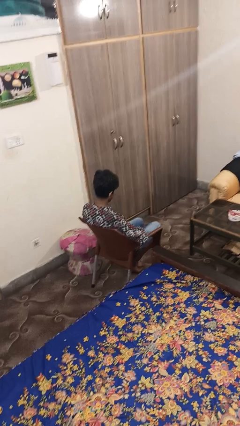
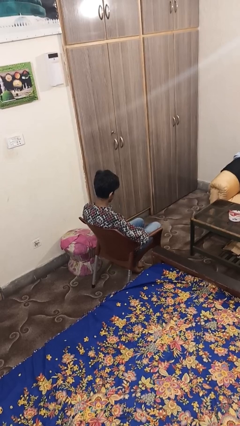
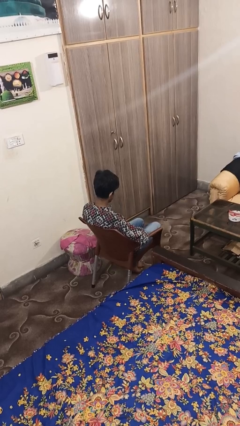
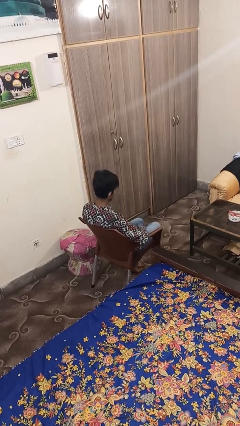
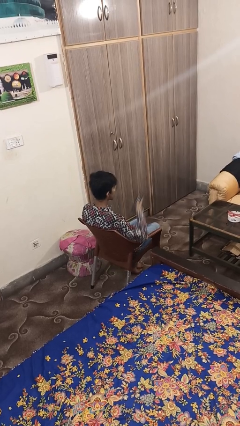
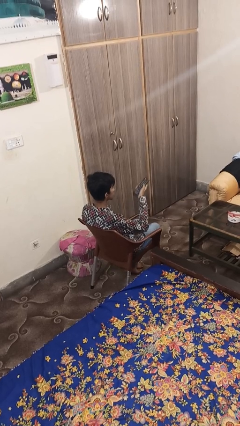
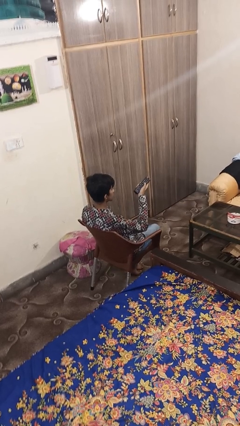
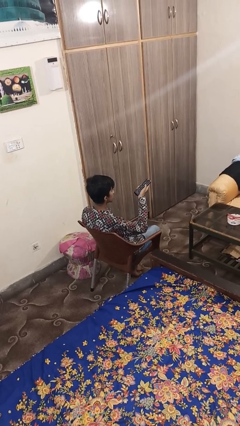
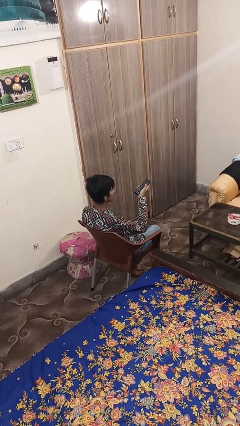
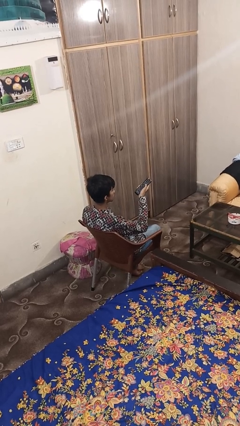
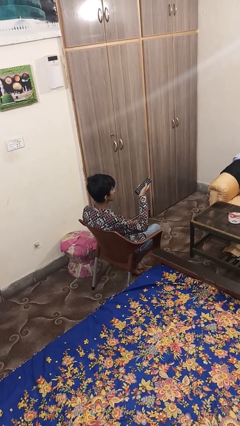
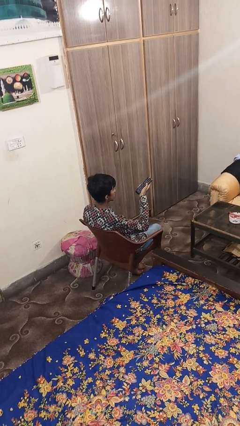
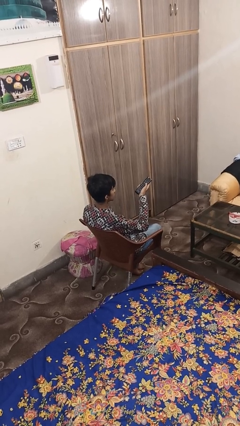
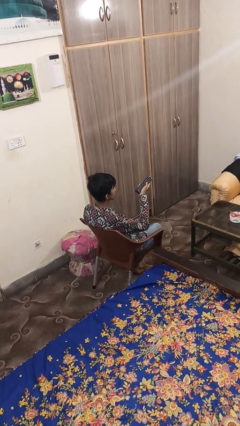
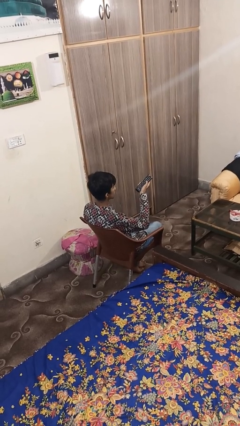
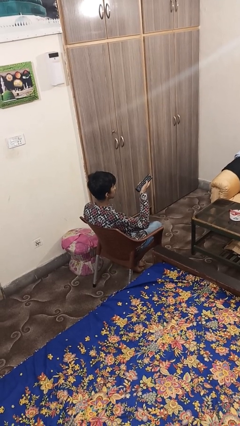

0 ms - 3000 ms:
person uses television remote

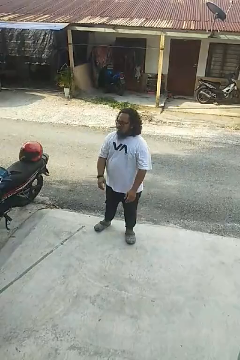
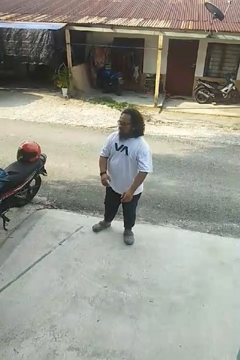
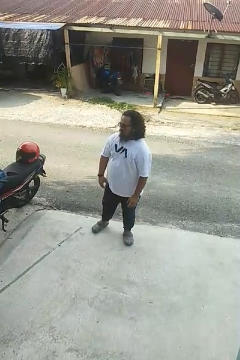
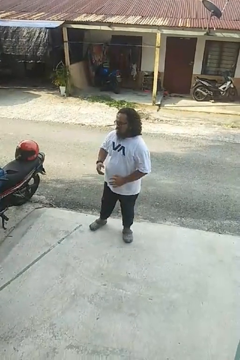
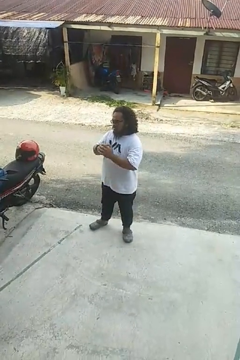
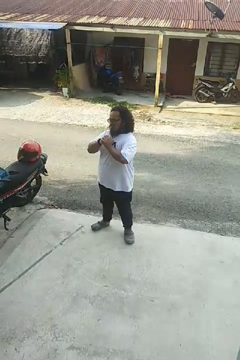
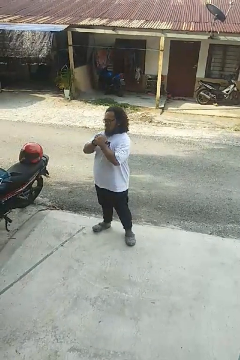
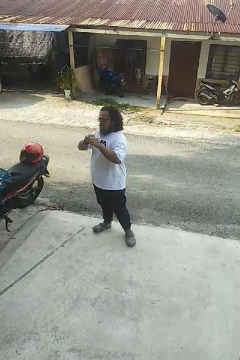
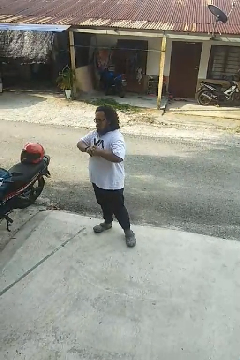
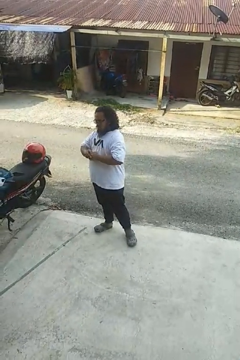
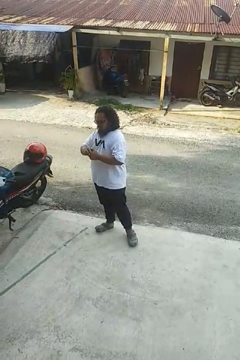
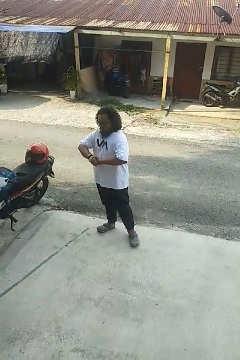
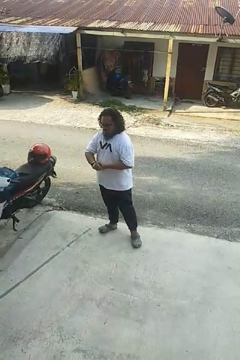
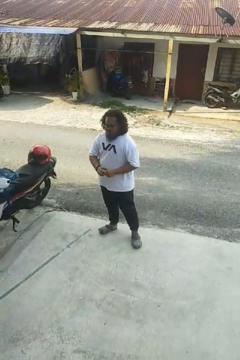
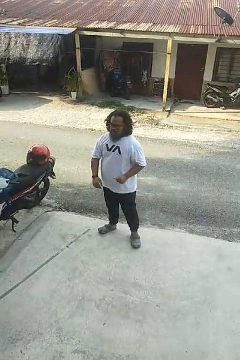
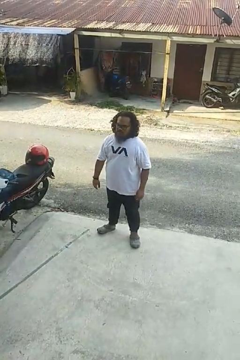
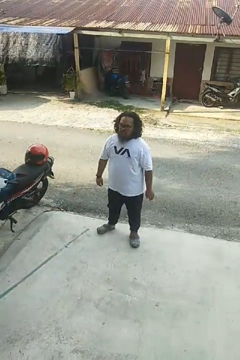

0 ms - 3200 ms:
person cracks knuckles

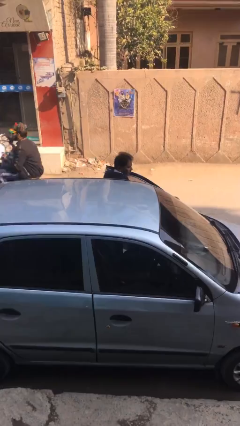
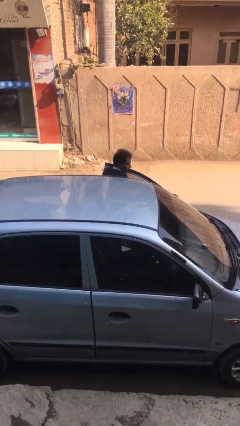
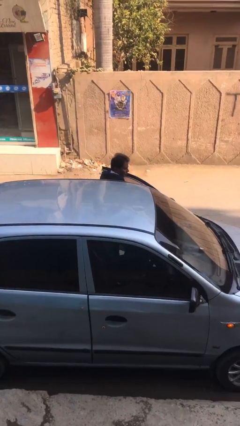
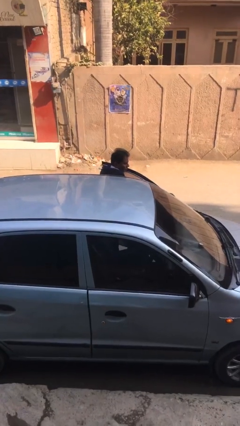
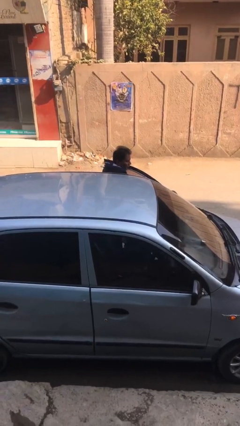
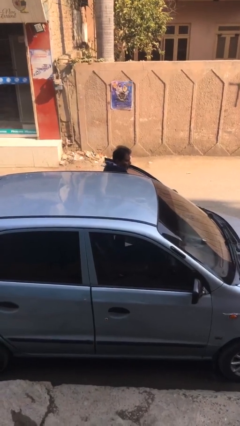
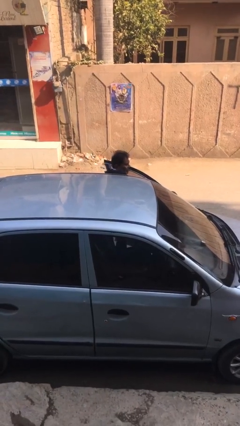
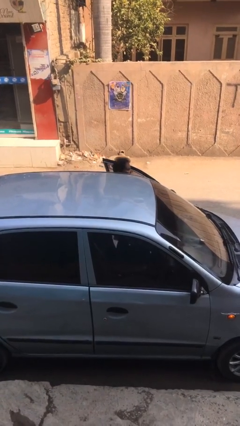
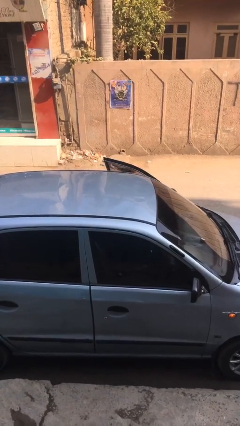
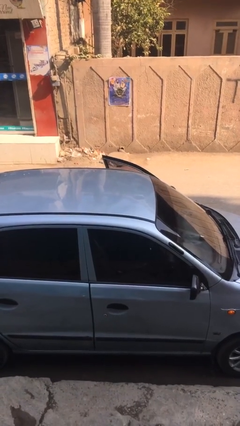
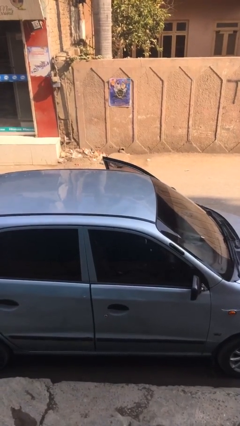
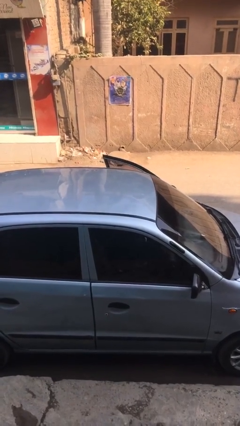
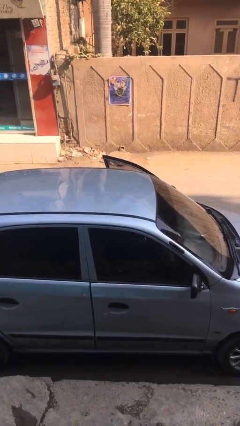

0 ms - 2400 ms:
person enters car

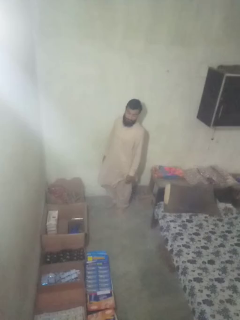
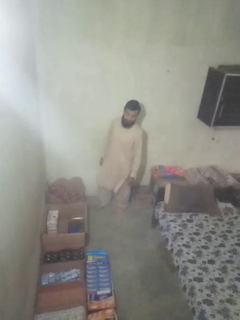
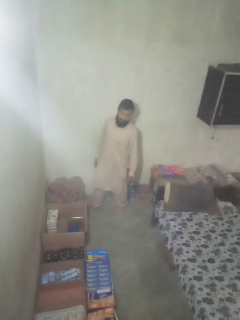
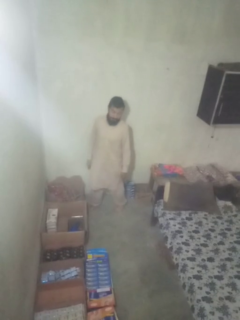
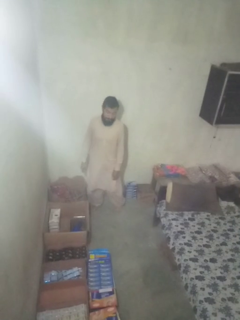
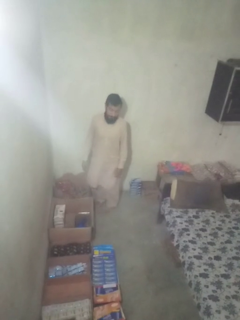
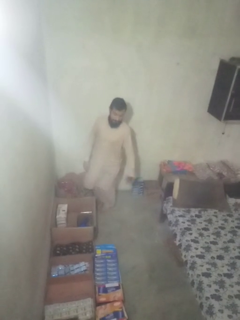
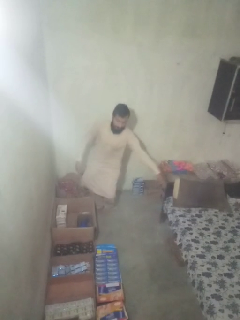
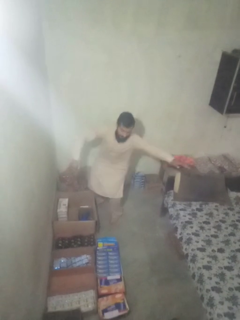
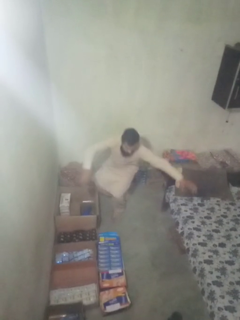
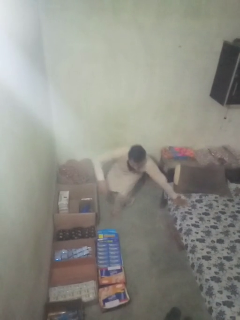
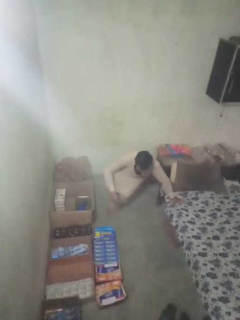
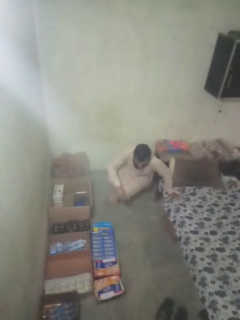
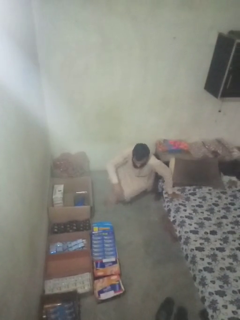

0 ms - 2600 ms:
person trips on object on floor

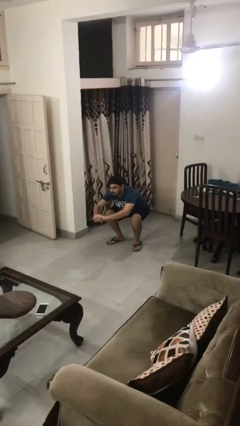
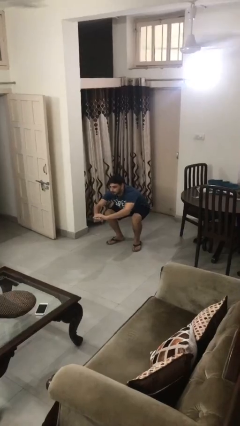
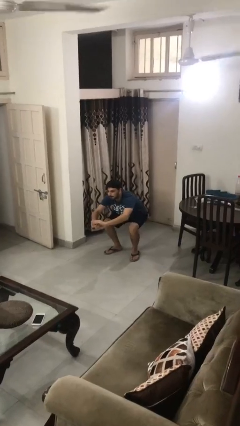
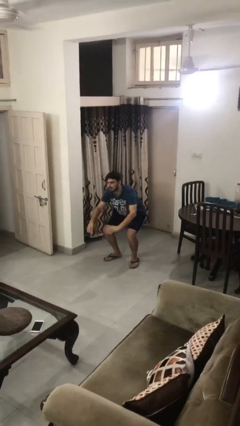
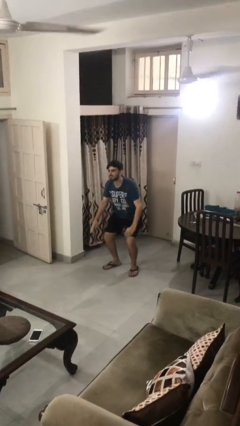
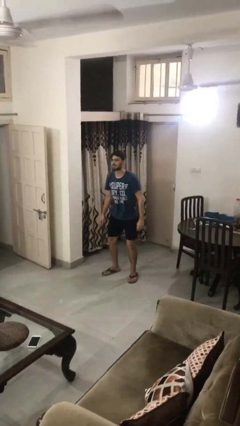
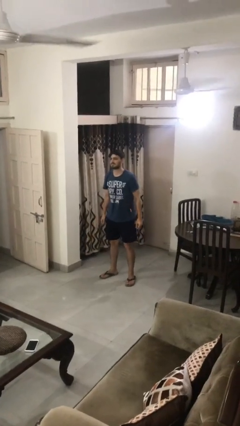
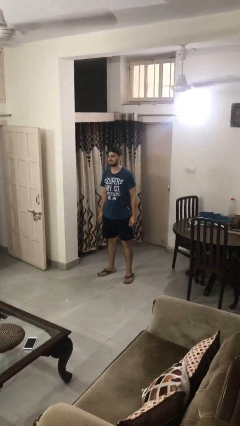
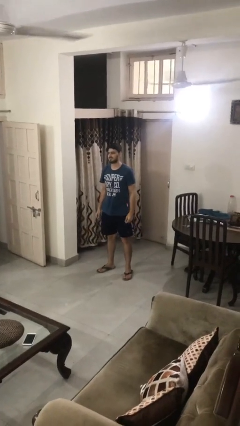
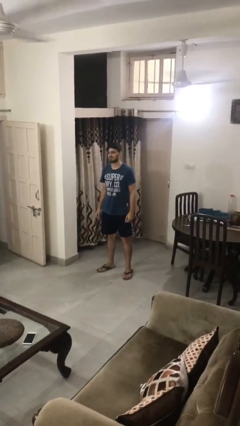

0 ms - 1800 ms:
person stands up

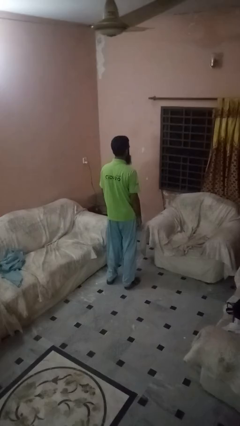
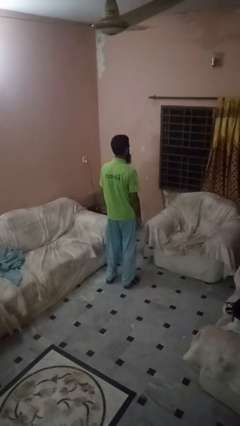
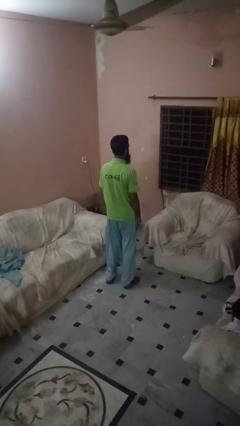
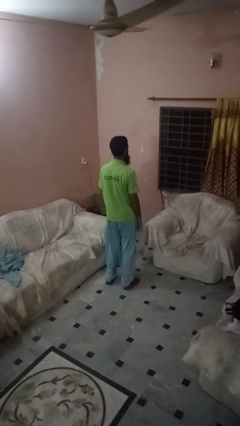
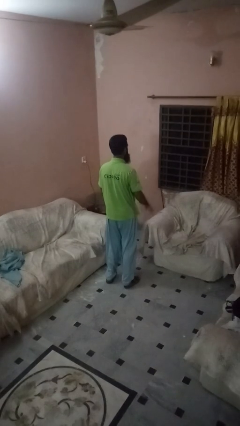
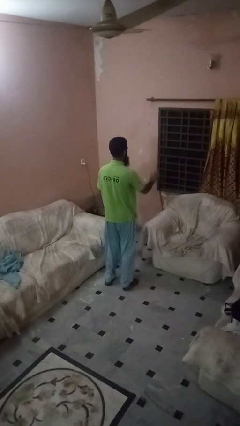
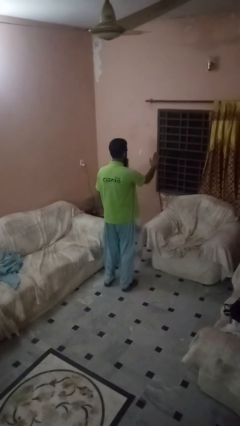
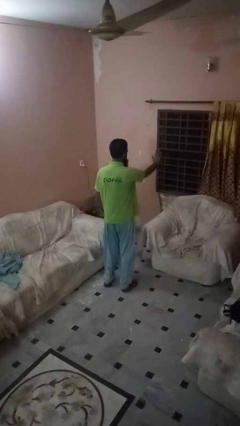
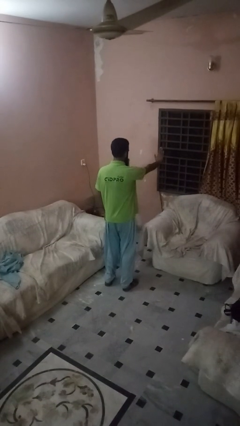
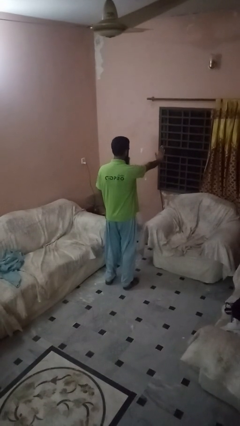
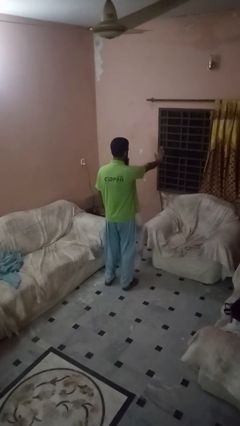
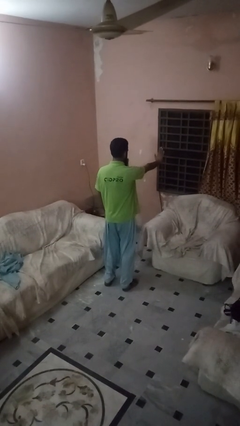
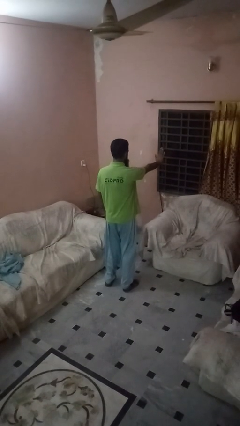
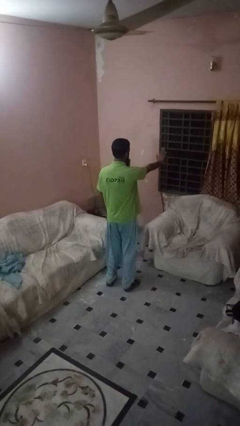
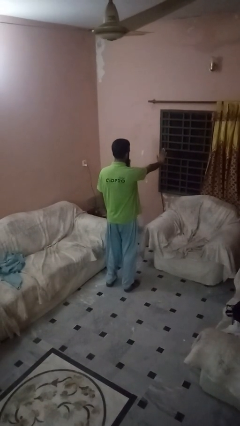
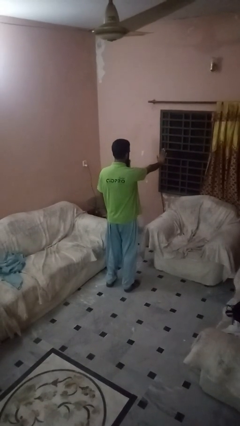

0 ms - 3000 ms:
person gestures stop

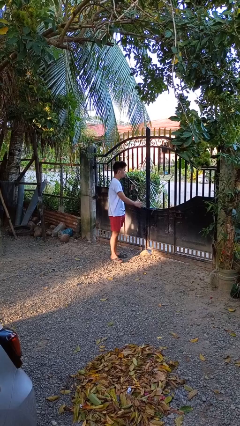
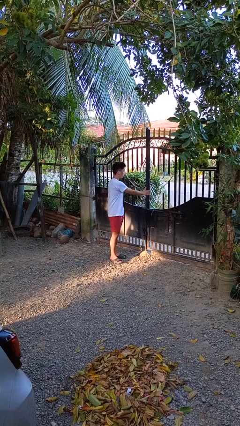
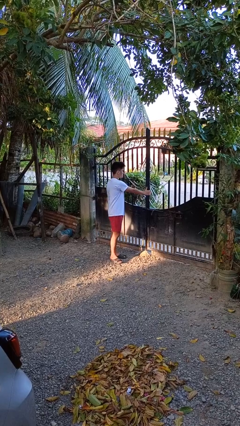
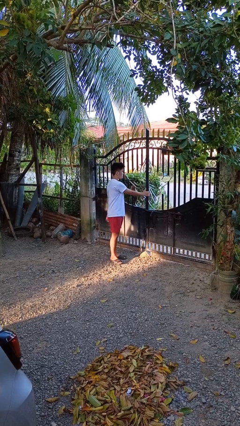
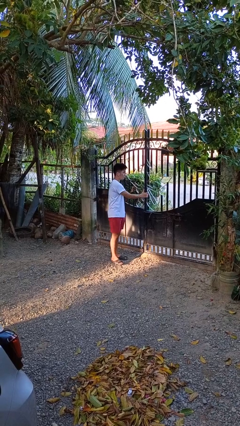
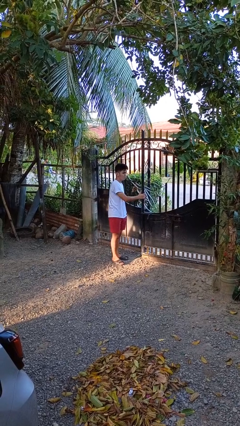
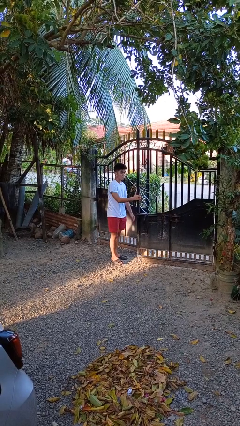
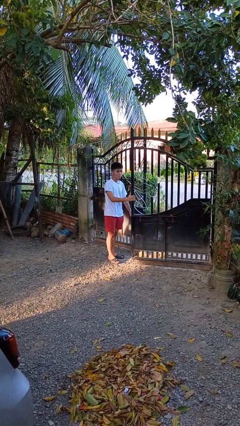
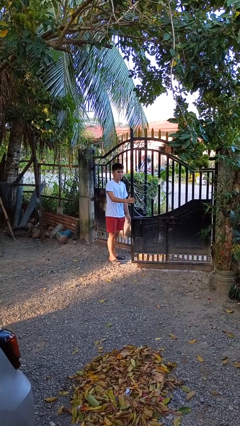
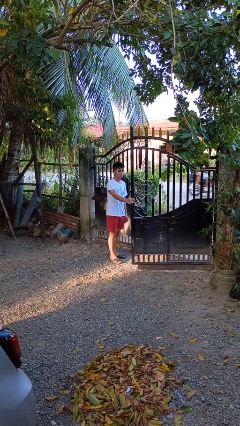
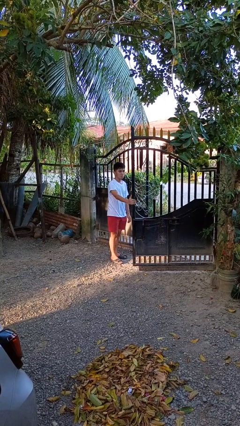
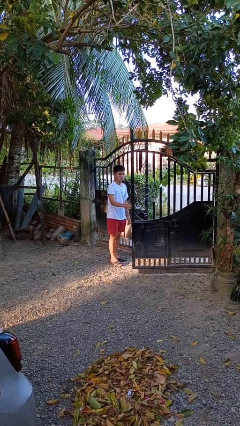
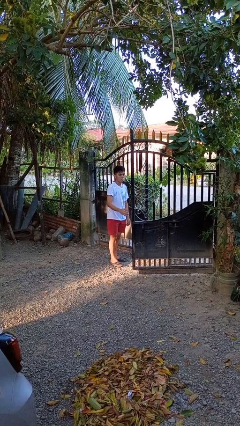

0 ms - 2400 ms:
person opens gate

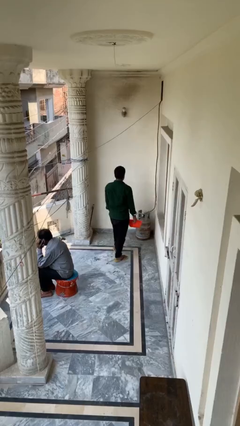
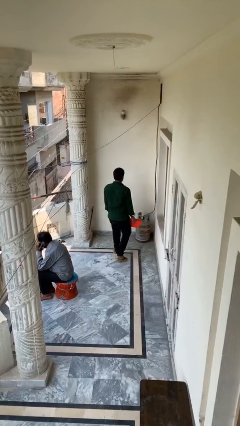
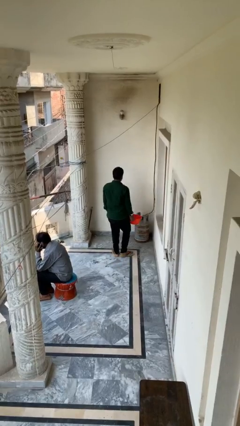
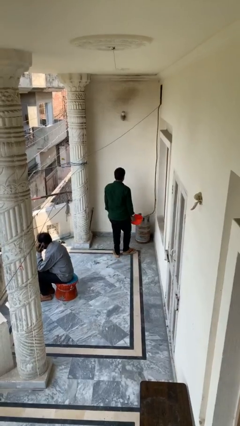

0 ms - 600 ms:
person steals object from person
